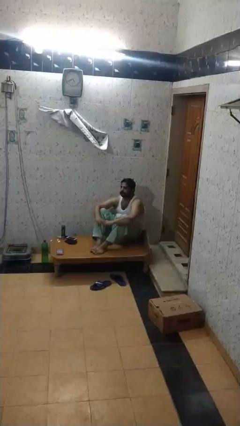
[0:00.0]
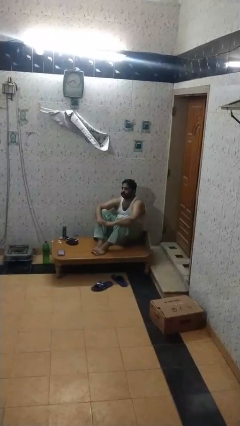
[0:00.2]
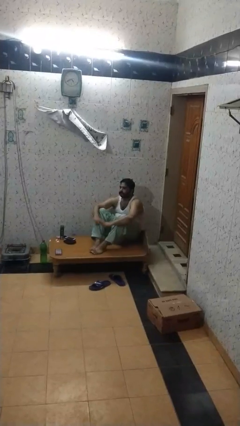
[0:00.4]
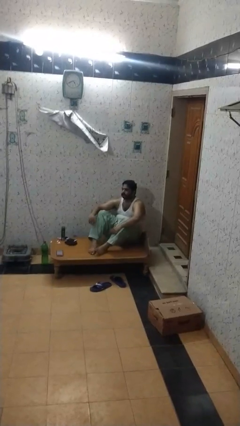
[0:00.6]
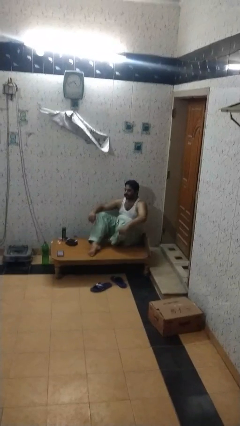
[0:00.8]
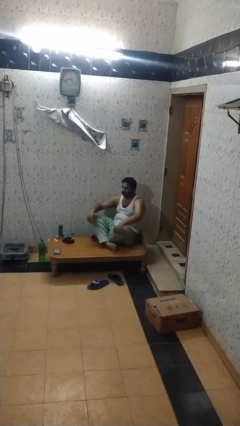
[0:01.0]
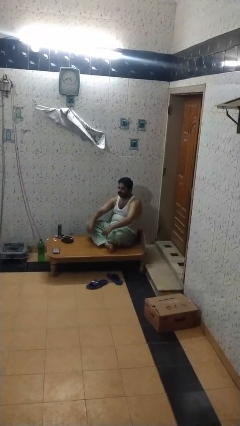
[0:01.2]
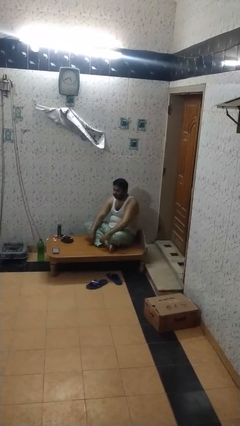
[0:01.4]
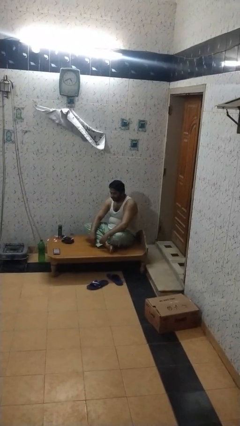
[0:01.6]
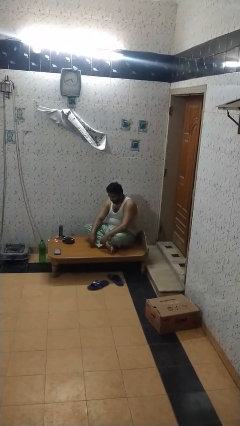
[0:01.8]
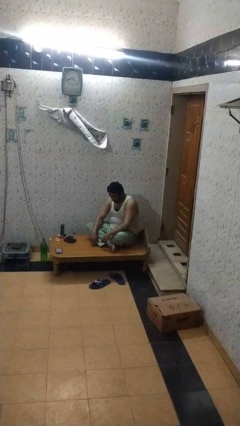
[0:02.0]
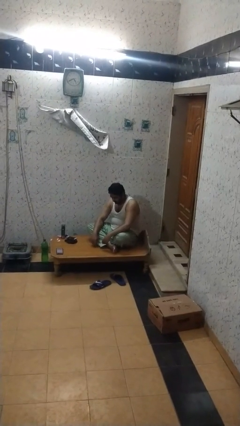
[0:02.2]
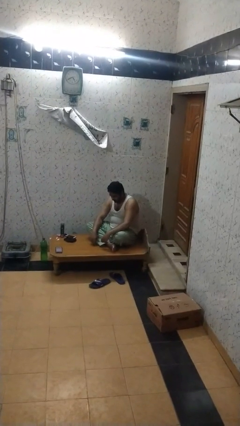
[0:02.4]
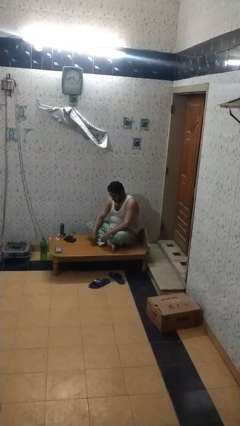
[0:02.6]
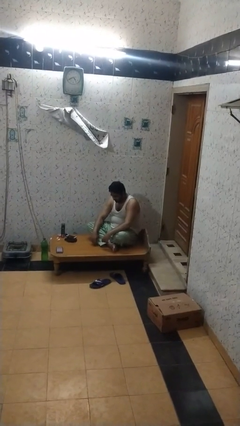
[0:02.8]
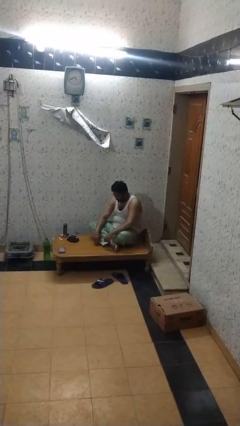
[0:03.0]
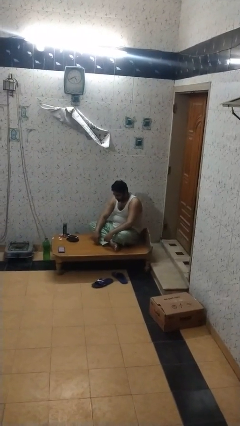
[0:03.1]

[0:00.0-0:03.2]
person crosses legs

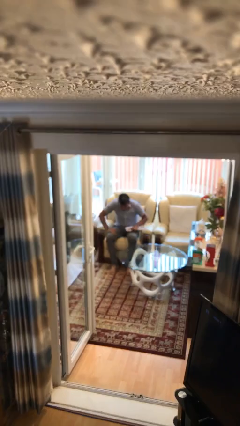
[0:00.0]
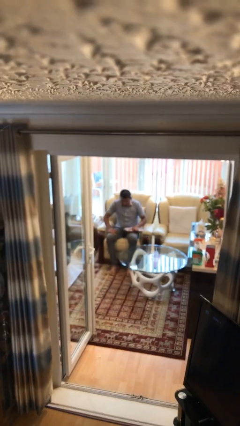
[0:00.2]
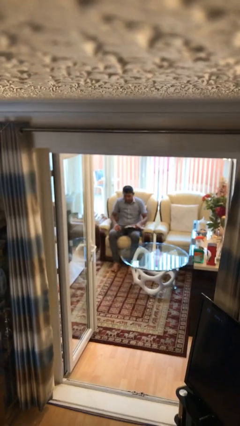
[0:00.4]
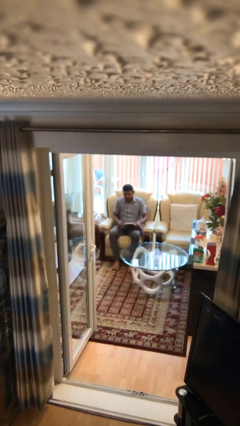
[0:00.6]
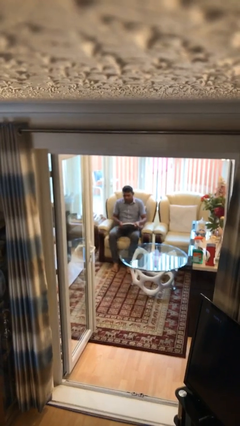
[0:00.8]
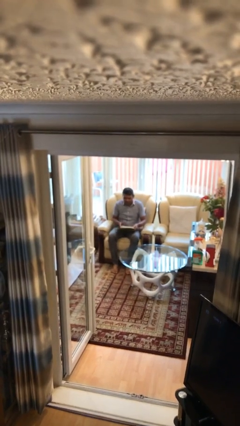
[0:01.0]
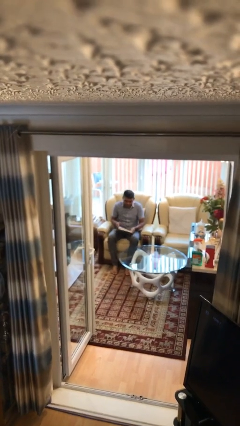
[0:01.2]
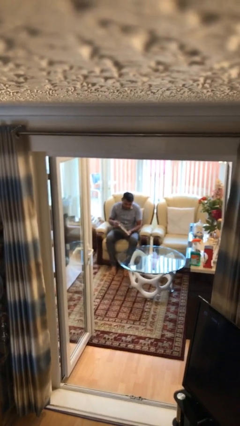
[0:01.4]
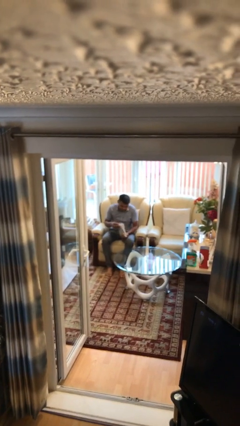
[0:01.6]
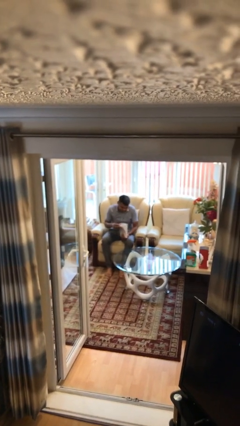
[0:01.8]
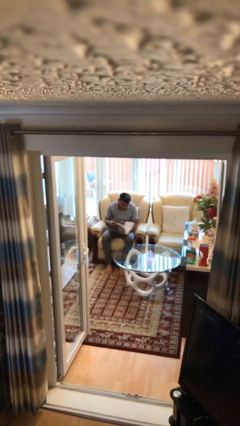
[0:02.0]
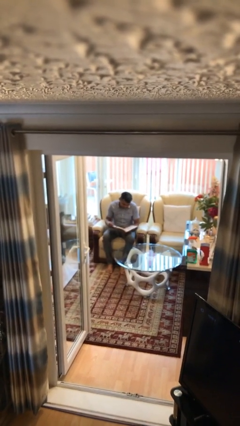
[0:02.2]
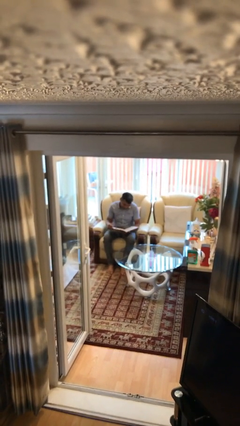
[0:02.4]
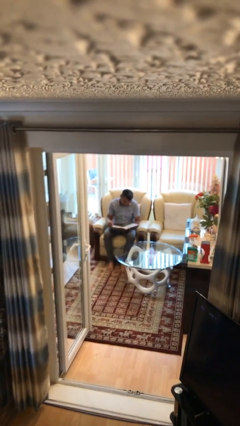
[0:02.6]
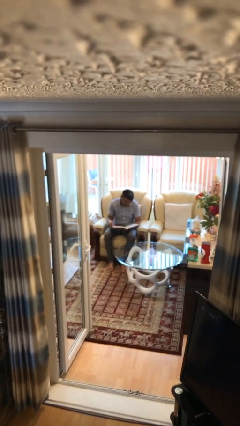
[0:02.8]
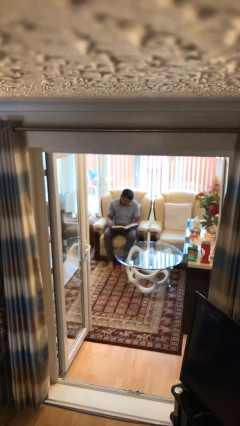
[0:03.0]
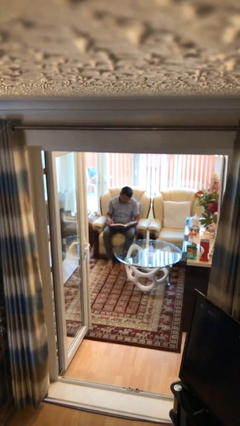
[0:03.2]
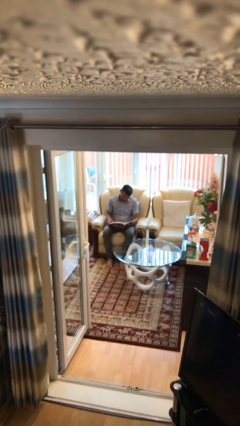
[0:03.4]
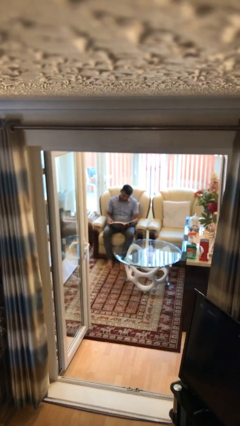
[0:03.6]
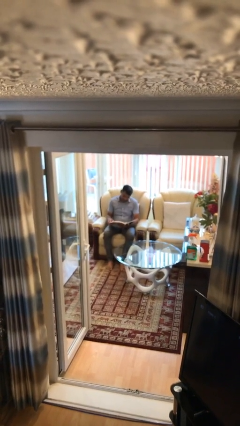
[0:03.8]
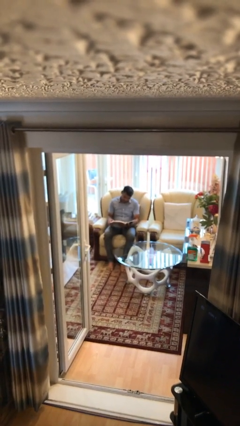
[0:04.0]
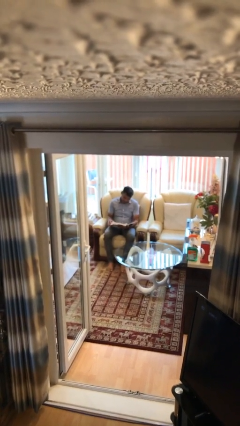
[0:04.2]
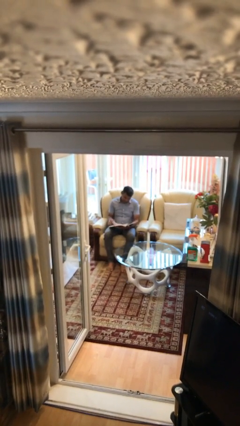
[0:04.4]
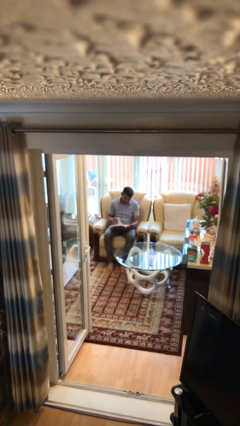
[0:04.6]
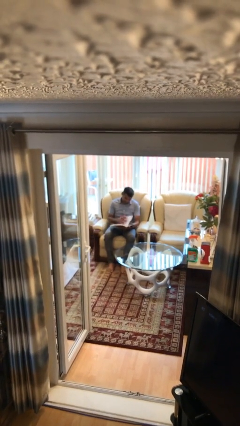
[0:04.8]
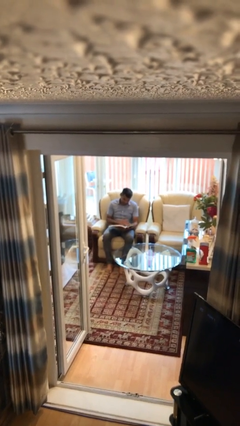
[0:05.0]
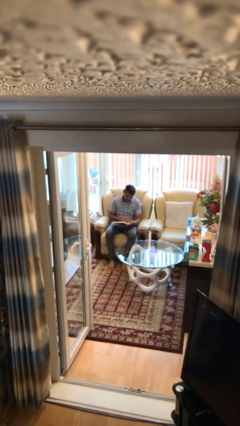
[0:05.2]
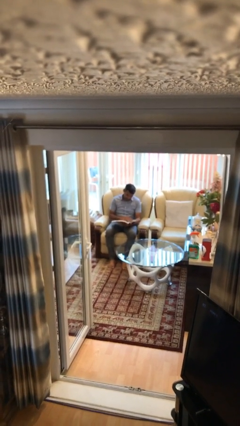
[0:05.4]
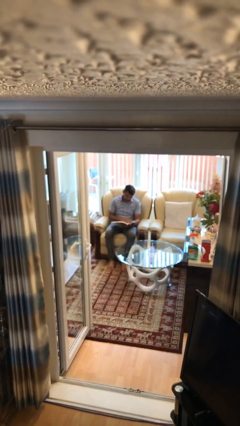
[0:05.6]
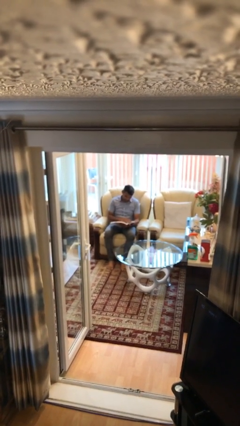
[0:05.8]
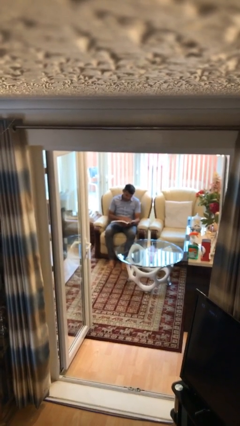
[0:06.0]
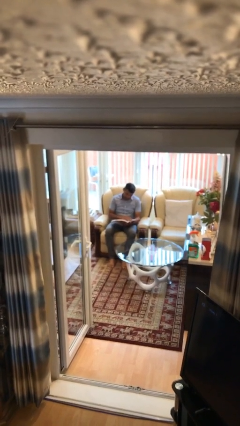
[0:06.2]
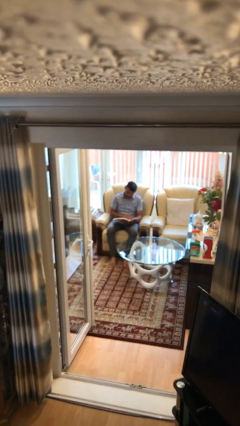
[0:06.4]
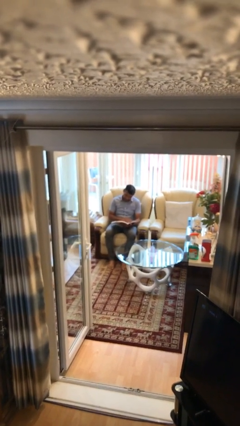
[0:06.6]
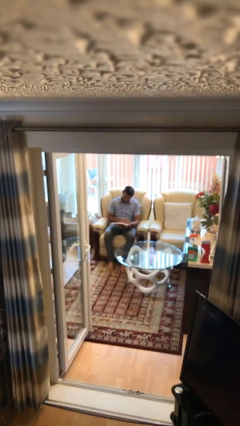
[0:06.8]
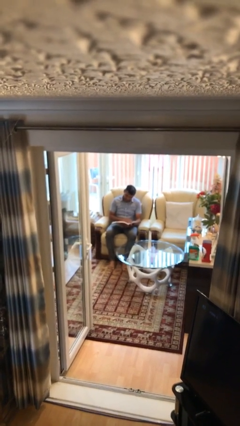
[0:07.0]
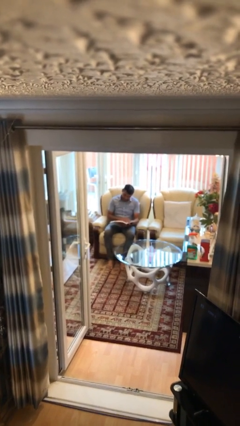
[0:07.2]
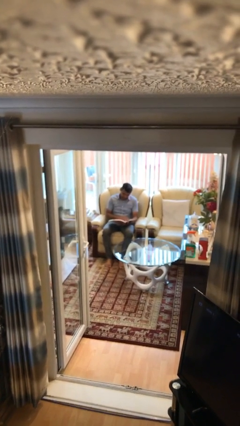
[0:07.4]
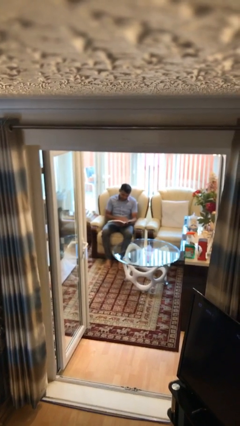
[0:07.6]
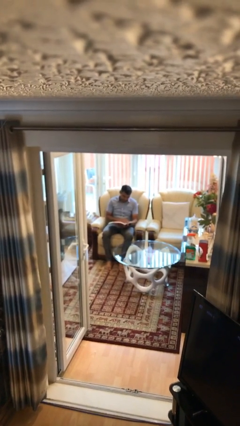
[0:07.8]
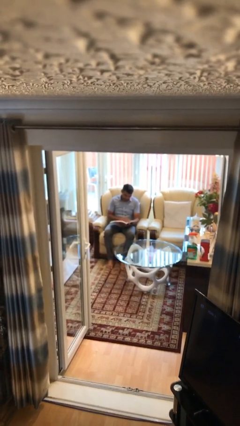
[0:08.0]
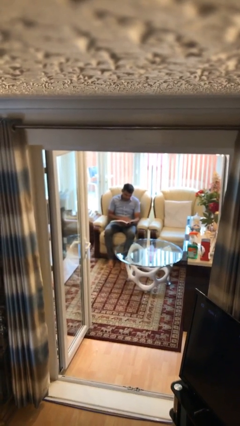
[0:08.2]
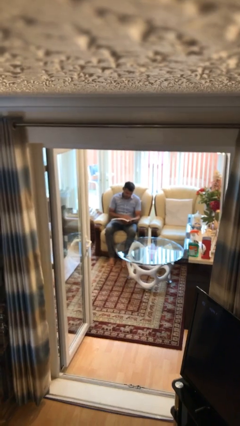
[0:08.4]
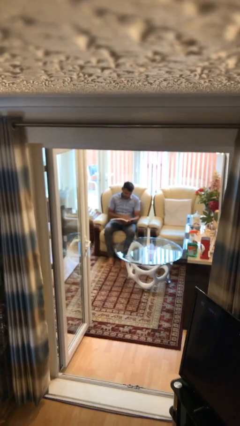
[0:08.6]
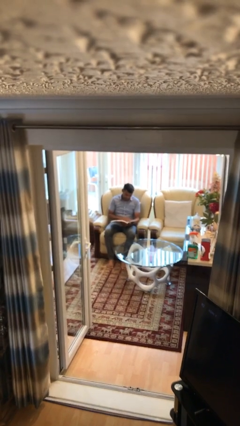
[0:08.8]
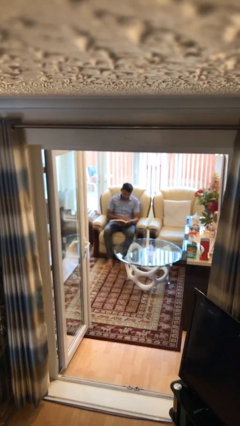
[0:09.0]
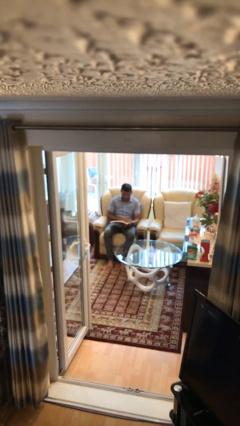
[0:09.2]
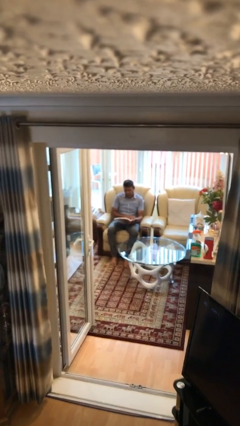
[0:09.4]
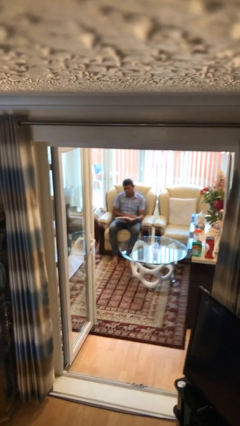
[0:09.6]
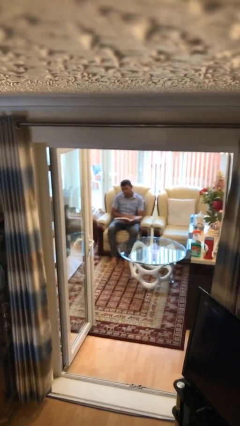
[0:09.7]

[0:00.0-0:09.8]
person reads document

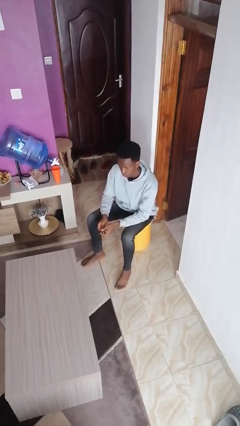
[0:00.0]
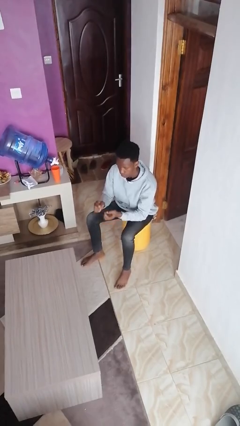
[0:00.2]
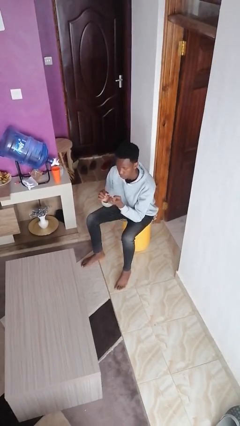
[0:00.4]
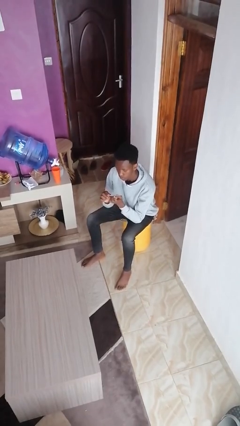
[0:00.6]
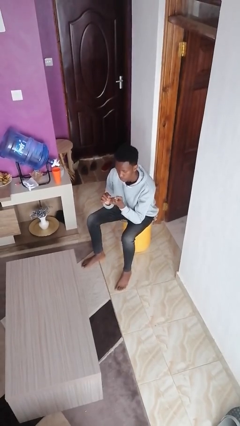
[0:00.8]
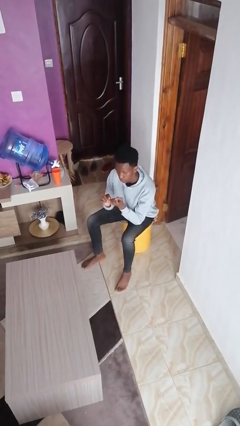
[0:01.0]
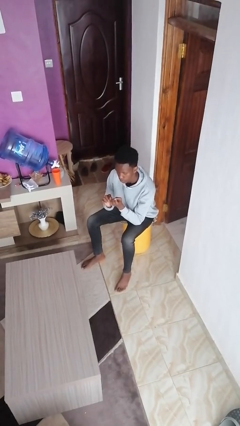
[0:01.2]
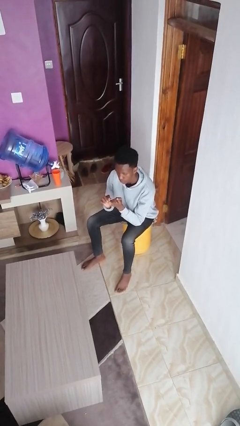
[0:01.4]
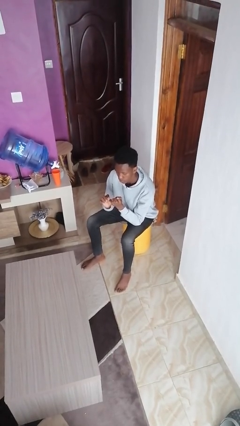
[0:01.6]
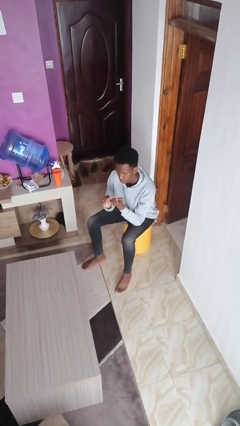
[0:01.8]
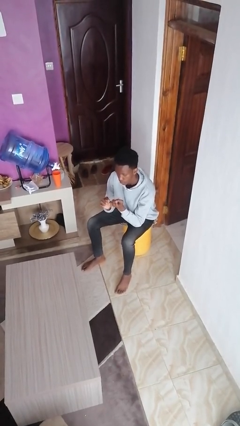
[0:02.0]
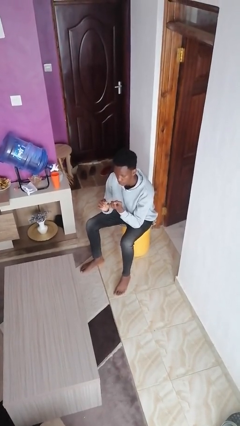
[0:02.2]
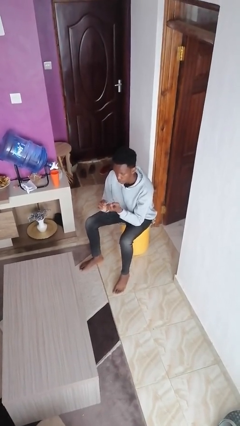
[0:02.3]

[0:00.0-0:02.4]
person files fingernails

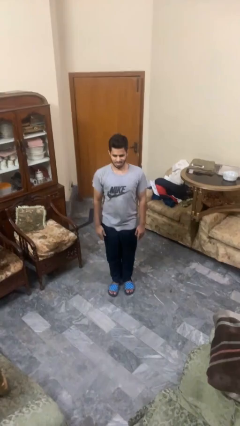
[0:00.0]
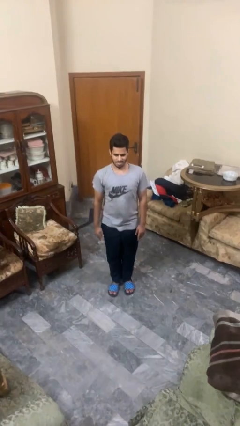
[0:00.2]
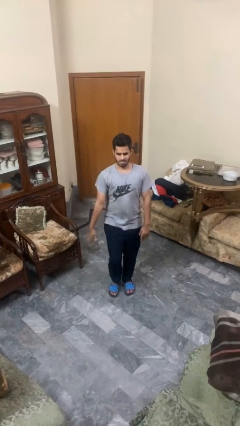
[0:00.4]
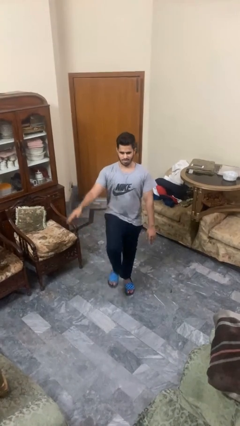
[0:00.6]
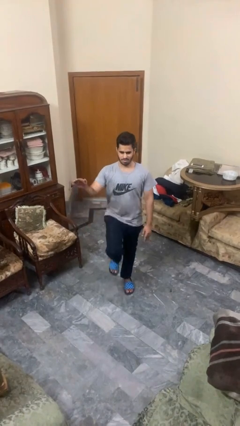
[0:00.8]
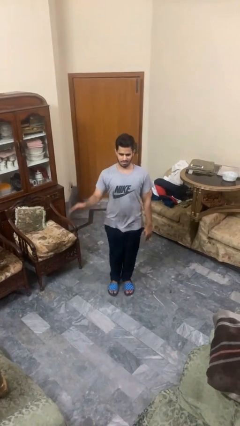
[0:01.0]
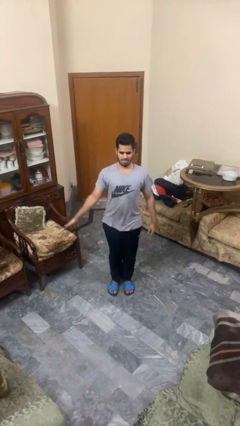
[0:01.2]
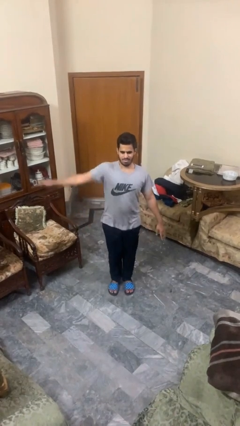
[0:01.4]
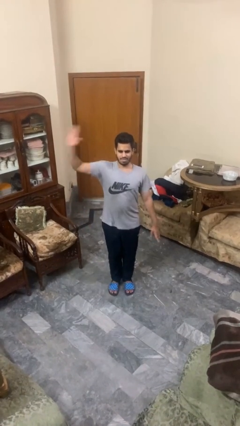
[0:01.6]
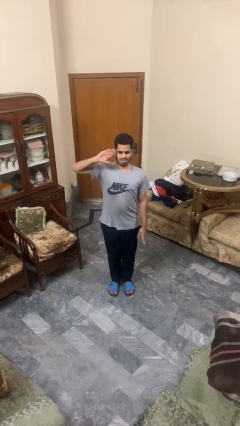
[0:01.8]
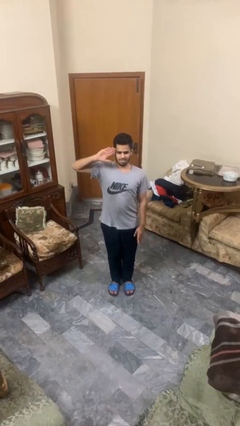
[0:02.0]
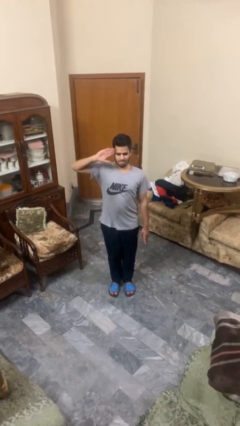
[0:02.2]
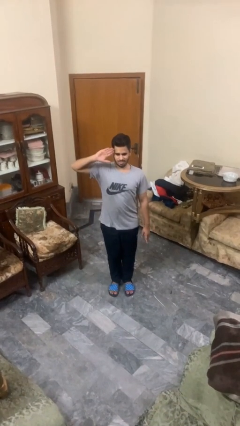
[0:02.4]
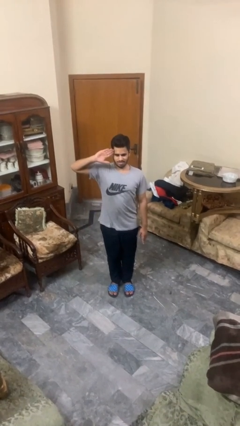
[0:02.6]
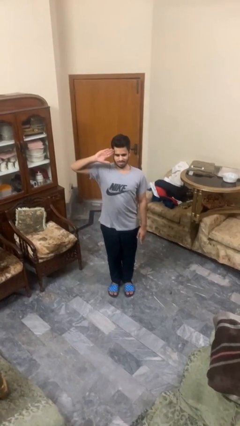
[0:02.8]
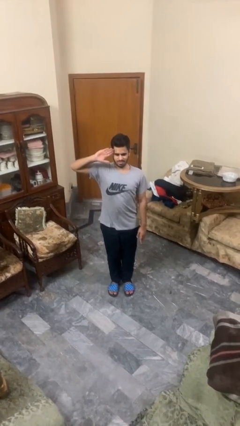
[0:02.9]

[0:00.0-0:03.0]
person salutes
